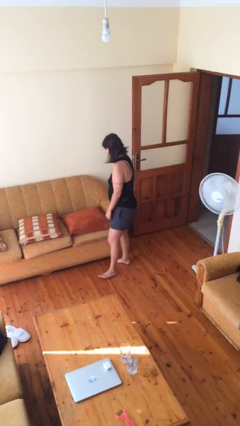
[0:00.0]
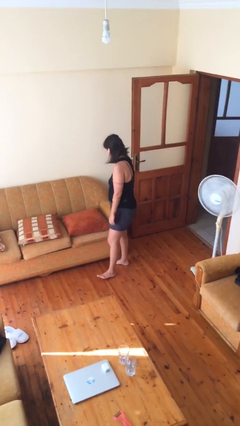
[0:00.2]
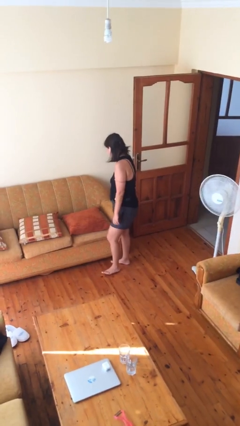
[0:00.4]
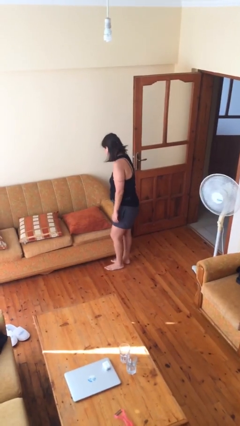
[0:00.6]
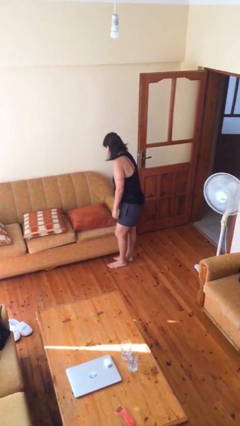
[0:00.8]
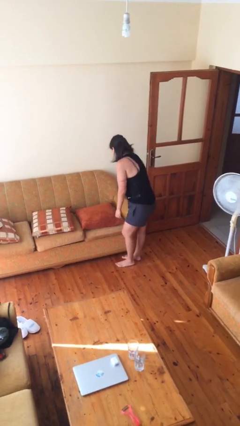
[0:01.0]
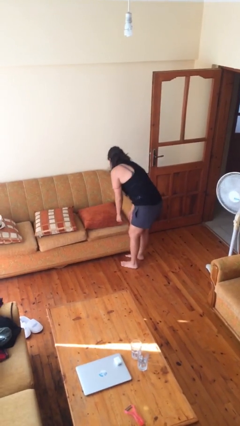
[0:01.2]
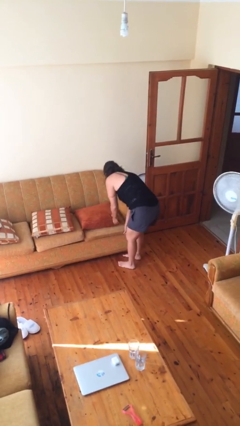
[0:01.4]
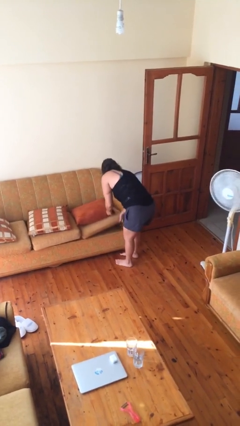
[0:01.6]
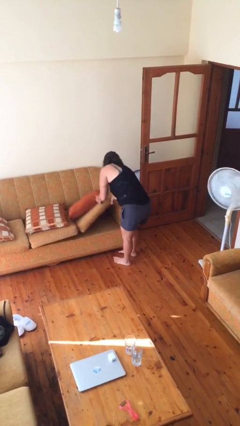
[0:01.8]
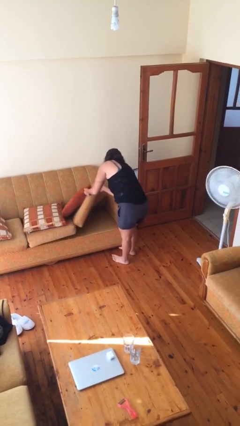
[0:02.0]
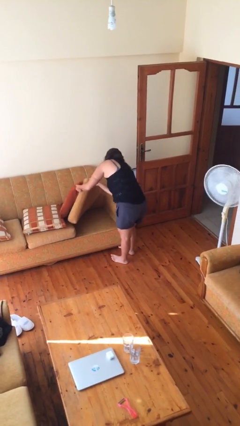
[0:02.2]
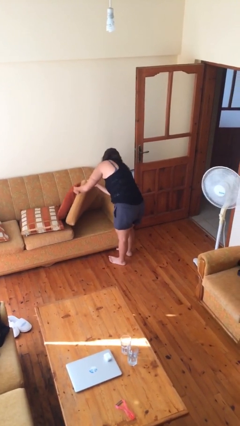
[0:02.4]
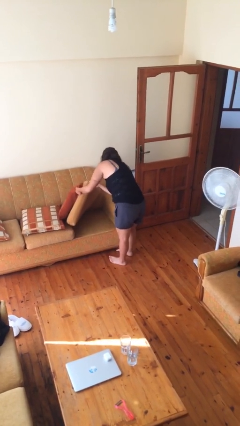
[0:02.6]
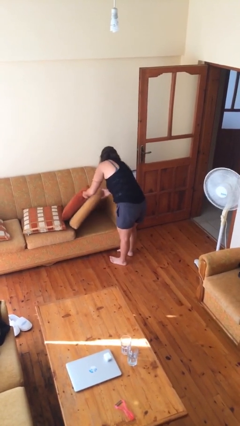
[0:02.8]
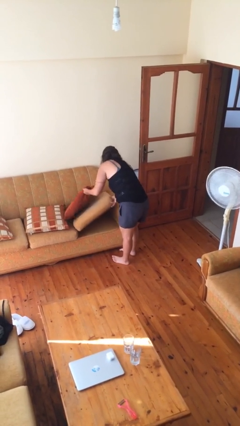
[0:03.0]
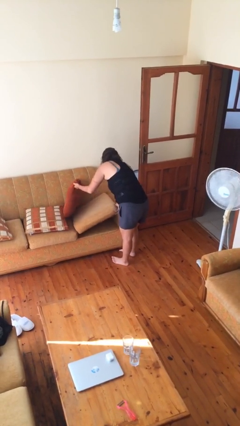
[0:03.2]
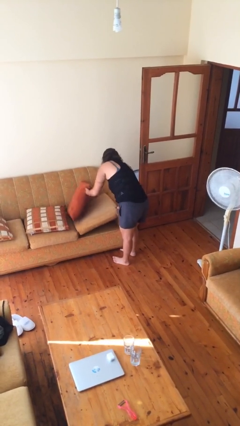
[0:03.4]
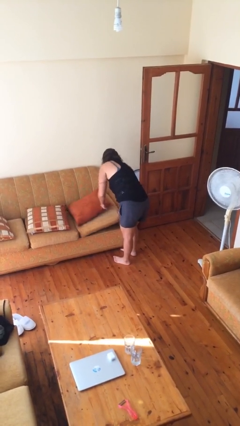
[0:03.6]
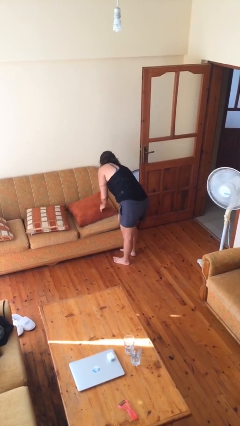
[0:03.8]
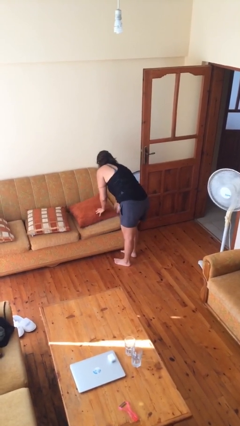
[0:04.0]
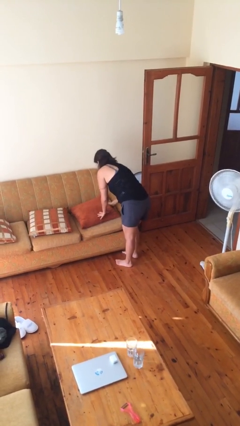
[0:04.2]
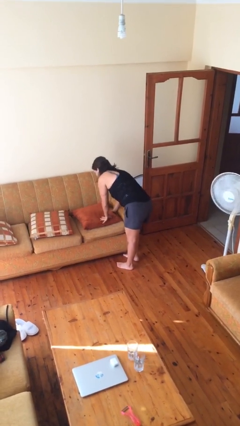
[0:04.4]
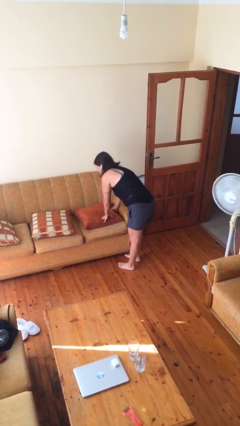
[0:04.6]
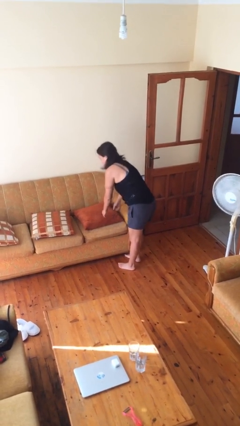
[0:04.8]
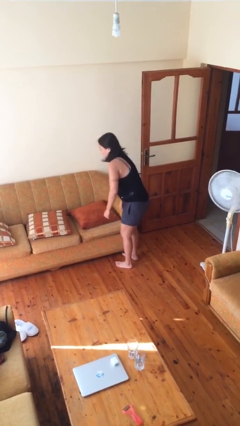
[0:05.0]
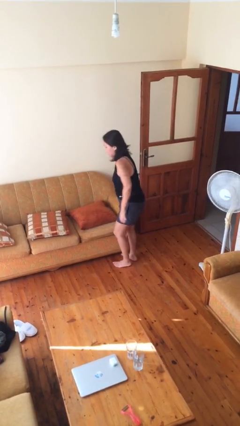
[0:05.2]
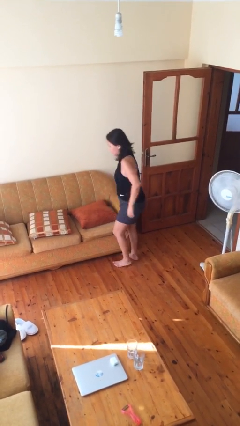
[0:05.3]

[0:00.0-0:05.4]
person searches in couch

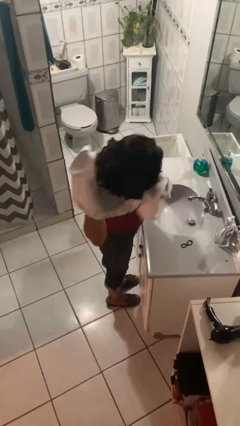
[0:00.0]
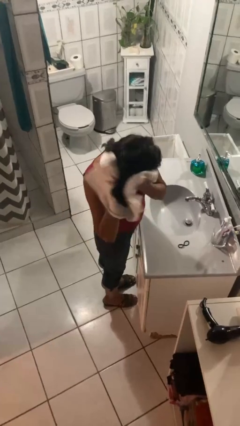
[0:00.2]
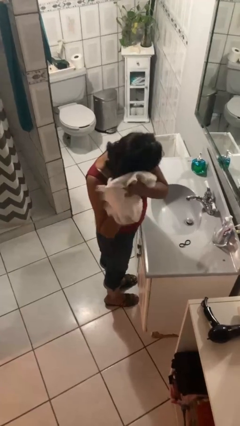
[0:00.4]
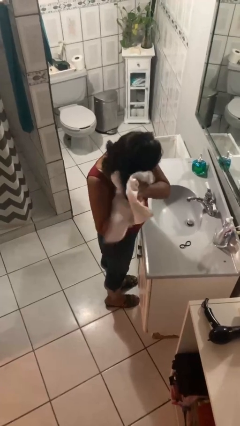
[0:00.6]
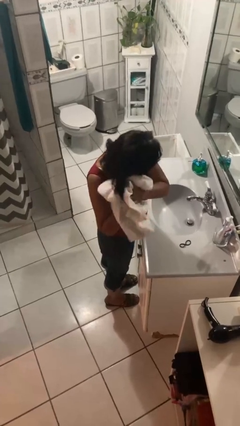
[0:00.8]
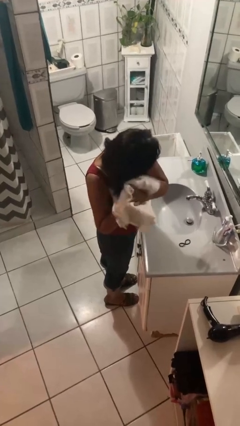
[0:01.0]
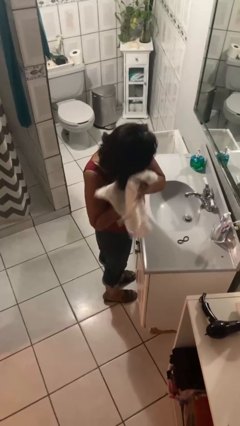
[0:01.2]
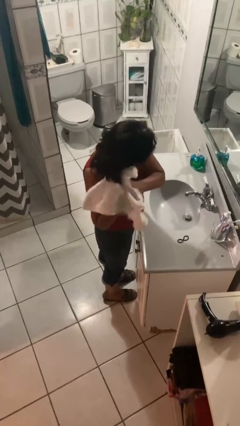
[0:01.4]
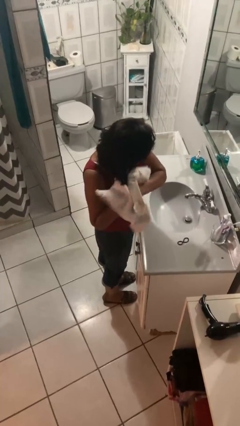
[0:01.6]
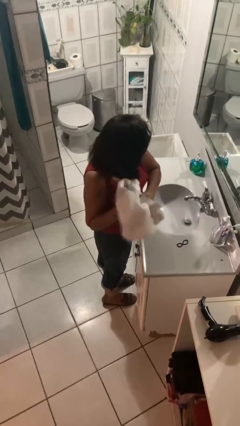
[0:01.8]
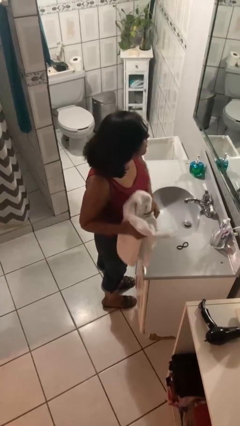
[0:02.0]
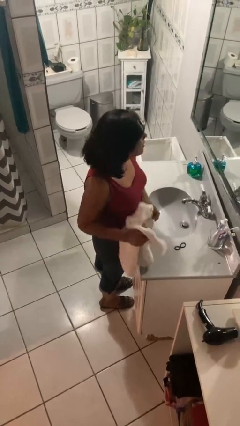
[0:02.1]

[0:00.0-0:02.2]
person dries hair with towel

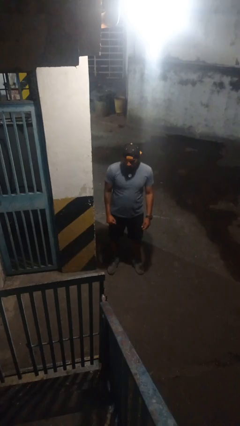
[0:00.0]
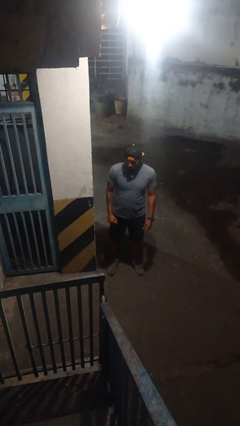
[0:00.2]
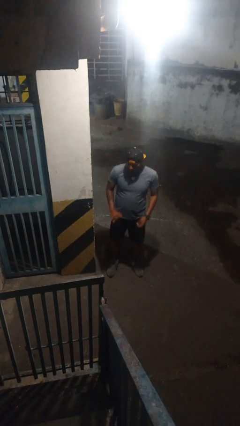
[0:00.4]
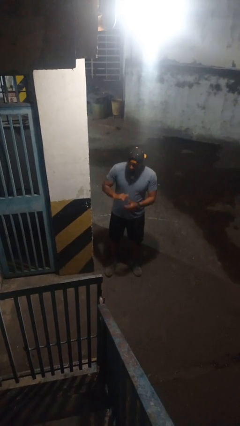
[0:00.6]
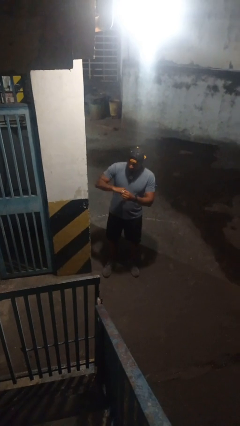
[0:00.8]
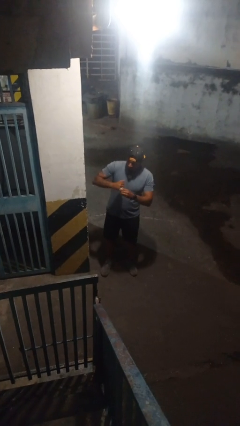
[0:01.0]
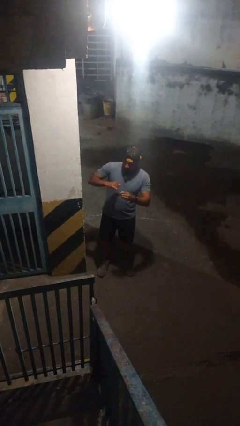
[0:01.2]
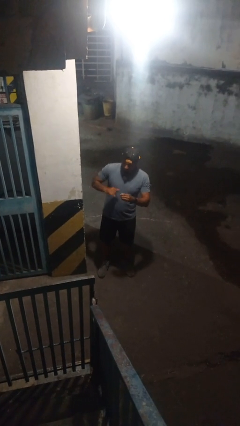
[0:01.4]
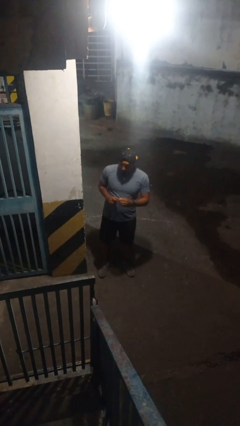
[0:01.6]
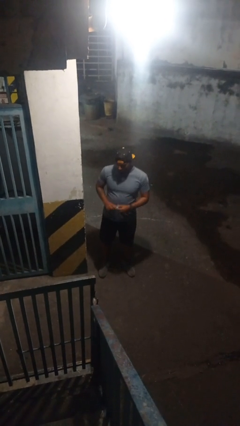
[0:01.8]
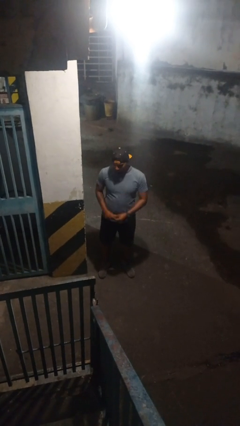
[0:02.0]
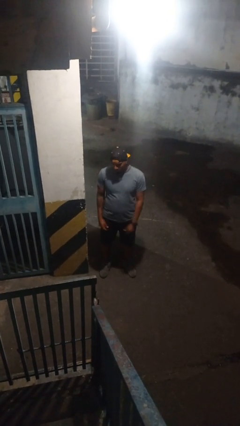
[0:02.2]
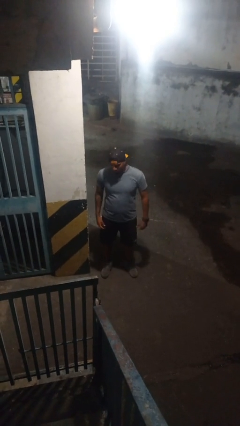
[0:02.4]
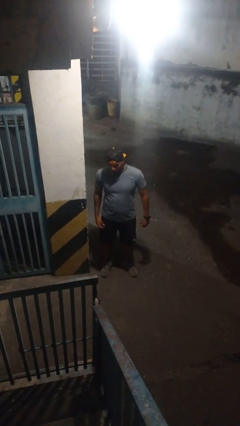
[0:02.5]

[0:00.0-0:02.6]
person takes off ring

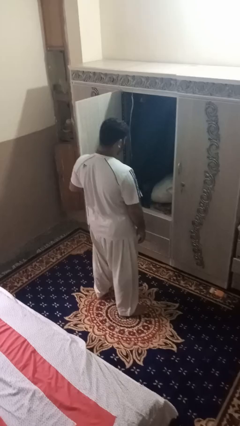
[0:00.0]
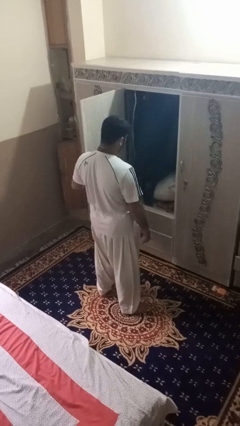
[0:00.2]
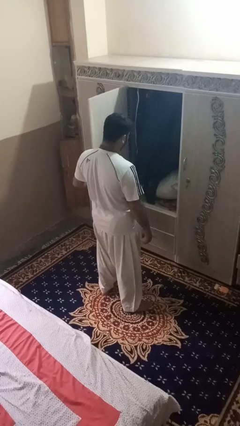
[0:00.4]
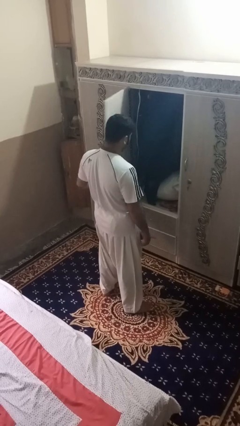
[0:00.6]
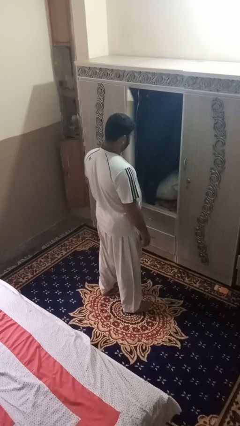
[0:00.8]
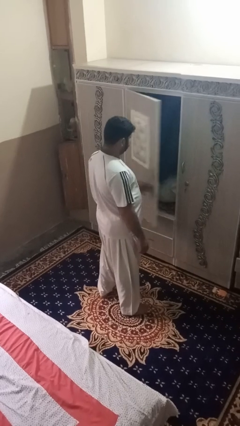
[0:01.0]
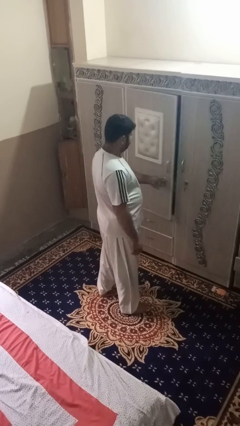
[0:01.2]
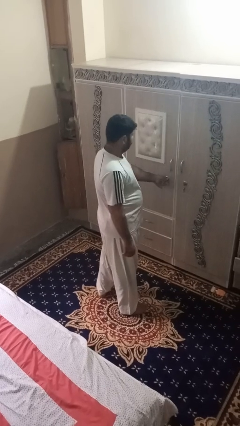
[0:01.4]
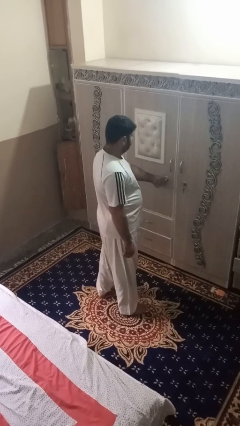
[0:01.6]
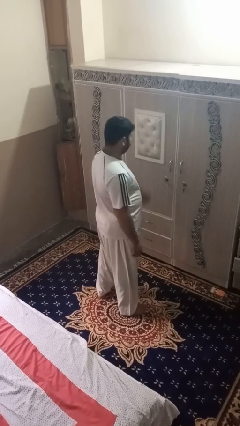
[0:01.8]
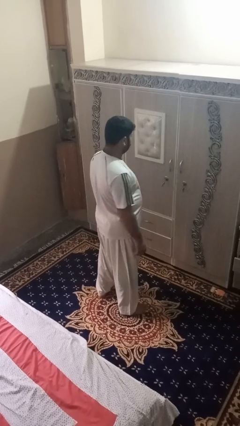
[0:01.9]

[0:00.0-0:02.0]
person closes dresser drawer

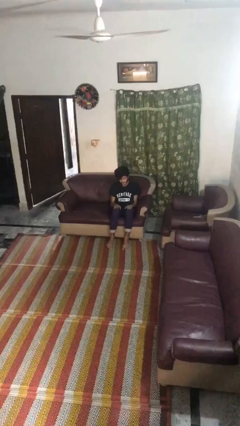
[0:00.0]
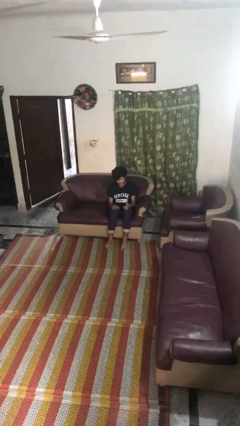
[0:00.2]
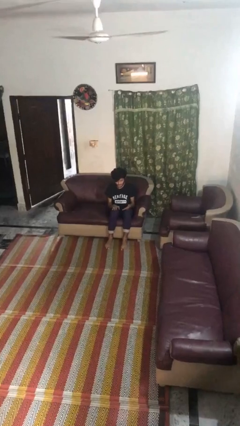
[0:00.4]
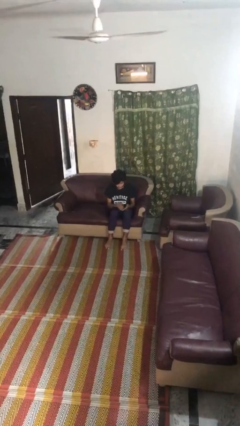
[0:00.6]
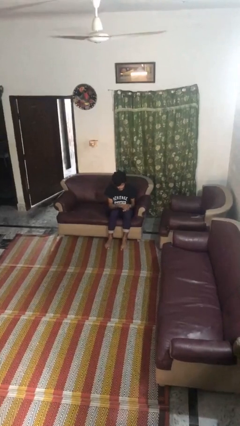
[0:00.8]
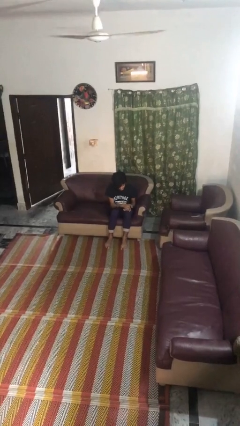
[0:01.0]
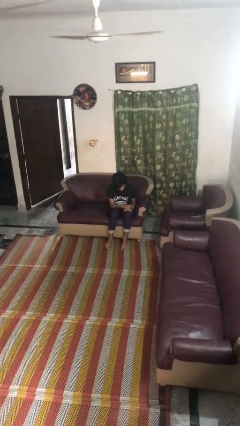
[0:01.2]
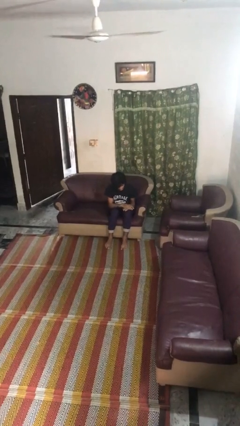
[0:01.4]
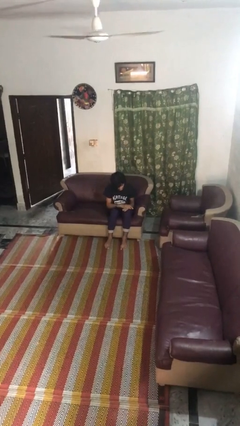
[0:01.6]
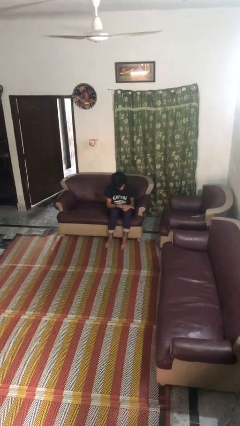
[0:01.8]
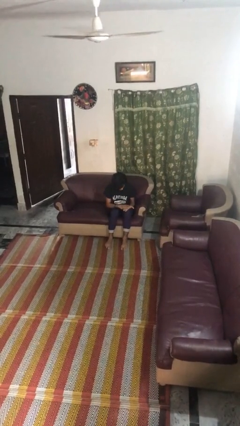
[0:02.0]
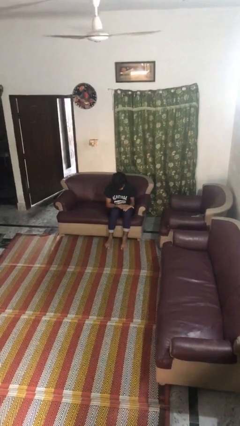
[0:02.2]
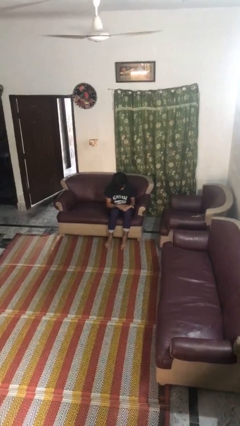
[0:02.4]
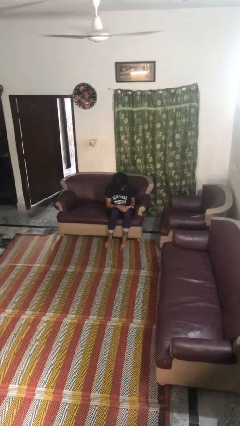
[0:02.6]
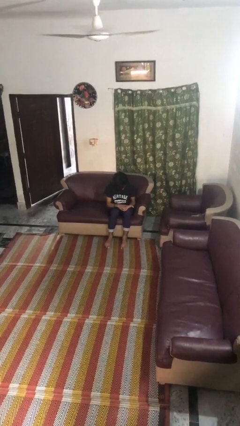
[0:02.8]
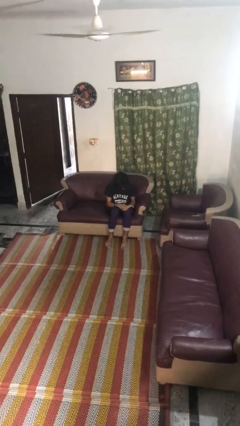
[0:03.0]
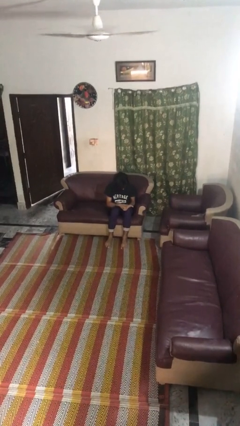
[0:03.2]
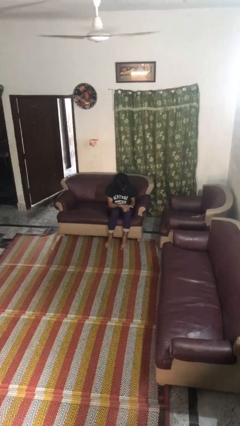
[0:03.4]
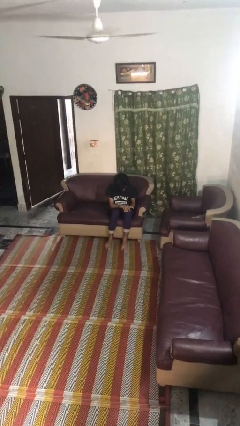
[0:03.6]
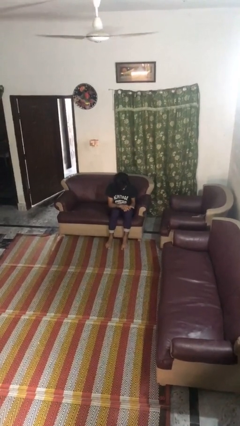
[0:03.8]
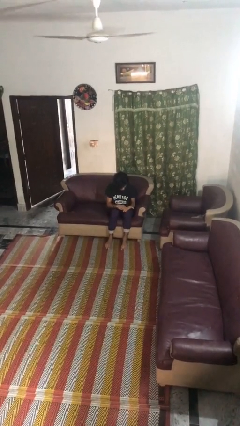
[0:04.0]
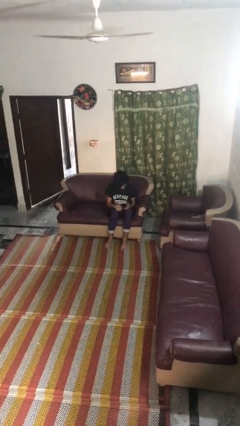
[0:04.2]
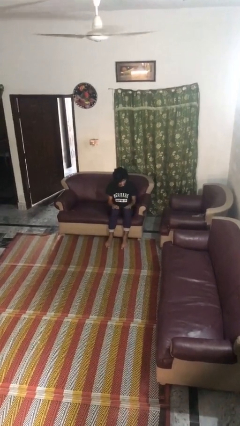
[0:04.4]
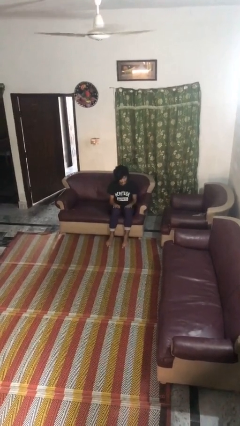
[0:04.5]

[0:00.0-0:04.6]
person looks at hands in lap

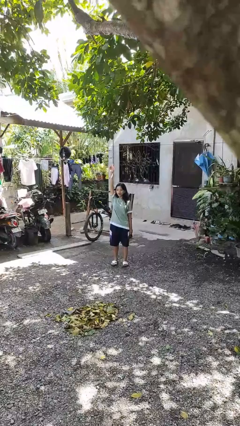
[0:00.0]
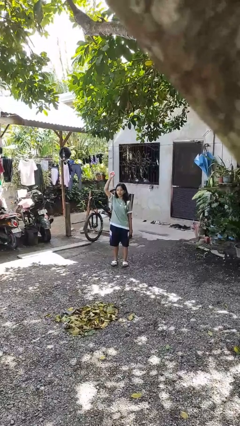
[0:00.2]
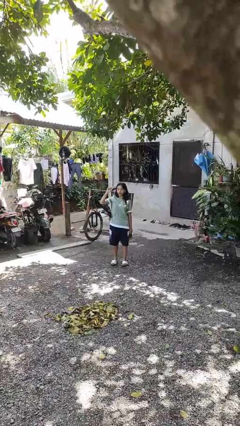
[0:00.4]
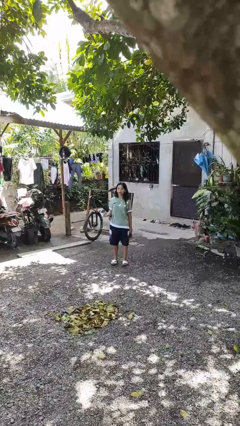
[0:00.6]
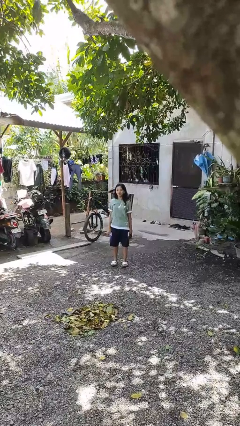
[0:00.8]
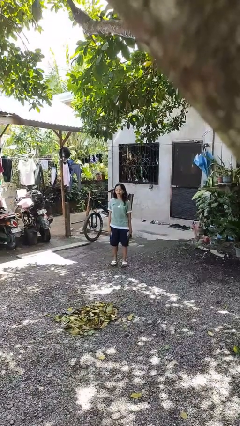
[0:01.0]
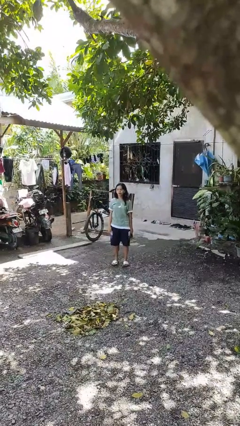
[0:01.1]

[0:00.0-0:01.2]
person gestures lower hand
